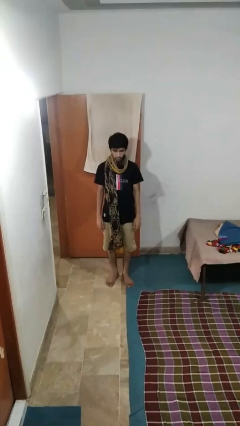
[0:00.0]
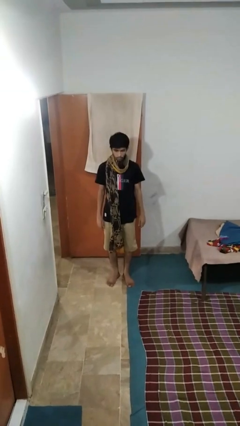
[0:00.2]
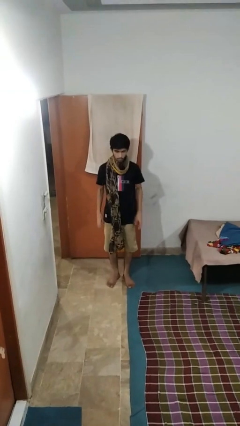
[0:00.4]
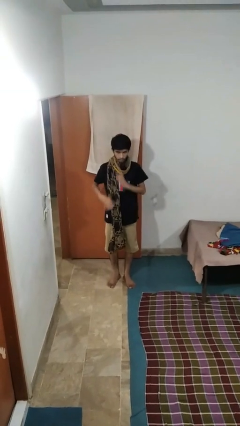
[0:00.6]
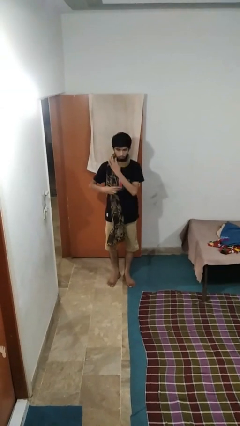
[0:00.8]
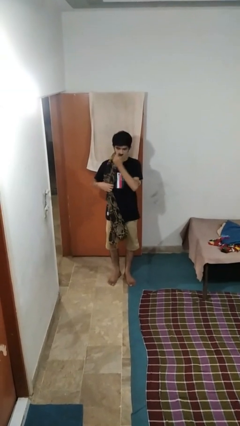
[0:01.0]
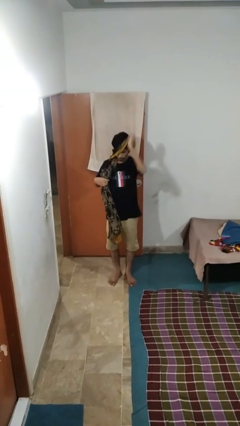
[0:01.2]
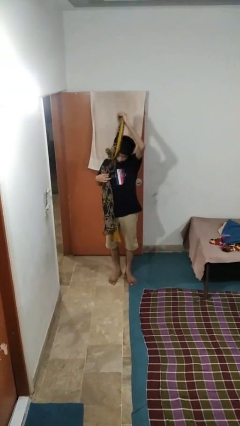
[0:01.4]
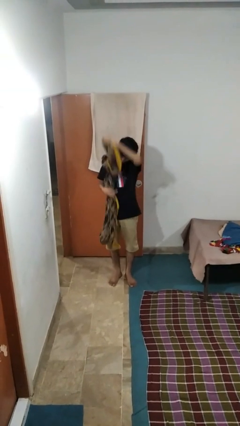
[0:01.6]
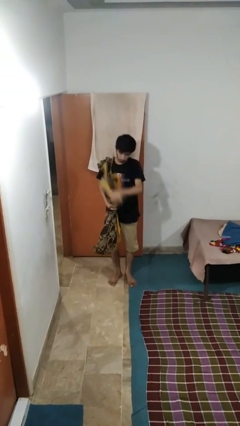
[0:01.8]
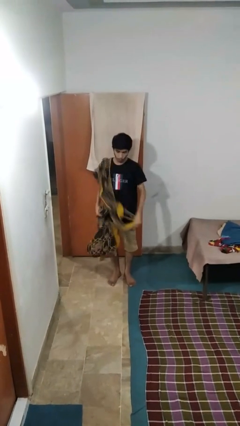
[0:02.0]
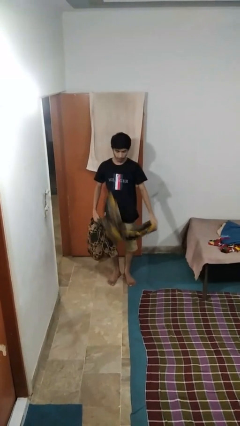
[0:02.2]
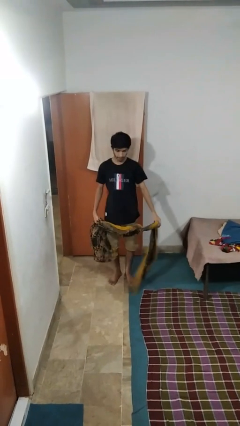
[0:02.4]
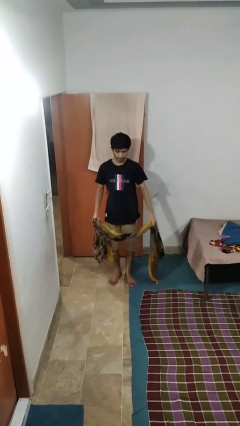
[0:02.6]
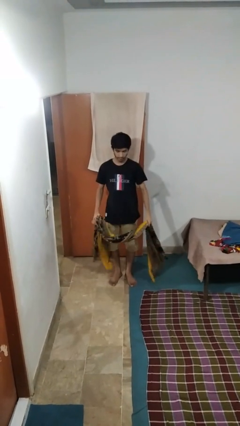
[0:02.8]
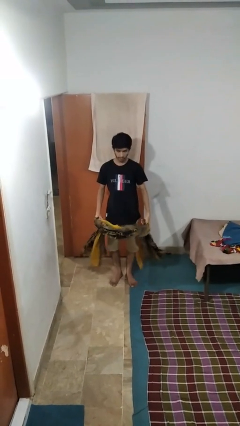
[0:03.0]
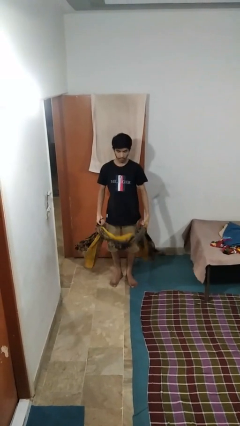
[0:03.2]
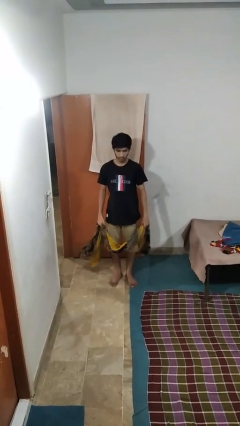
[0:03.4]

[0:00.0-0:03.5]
person takes off scarf

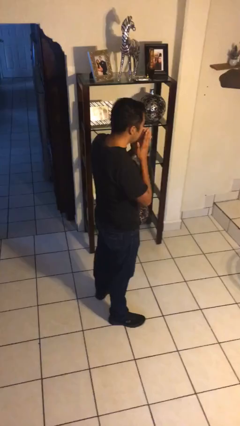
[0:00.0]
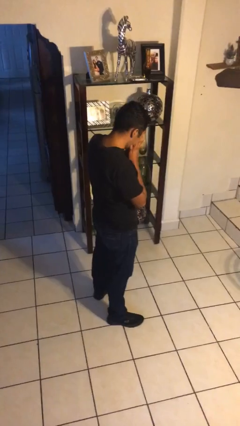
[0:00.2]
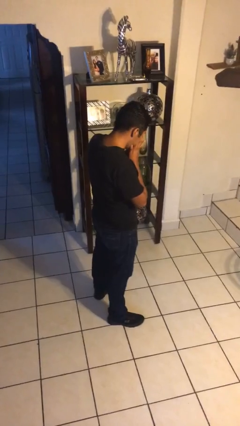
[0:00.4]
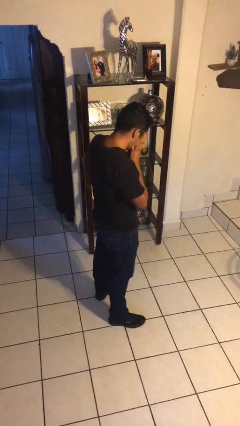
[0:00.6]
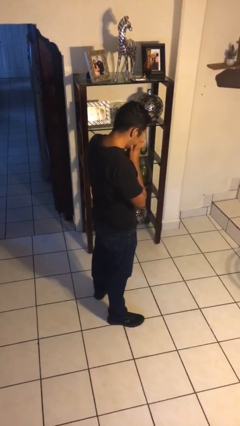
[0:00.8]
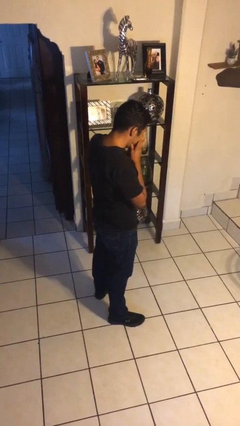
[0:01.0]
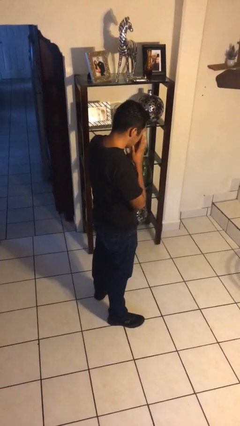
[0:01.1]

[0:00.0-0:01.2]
person sneezes into hand

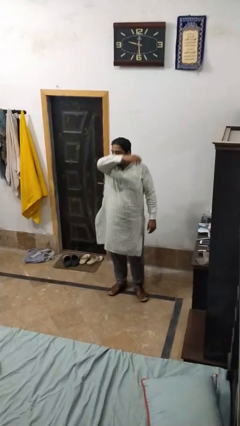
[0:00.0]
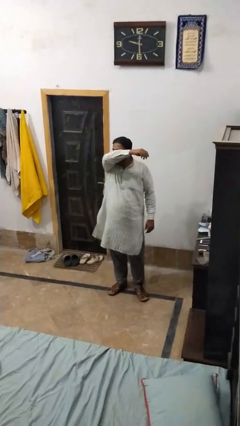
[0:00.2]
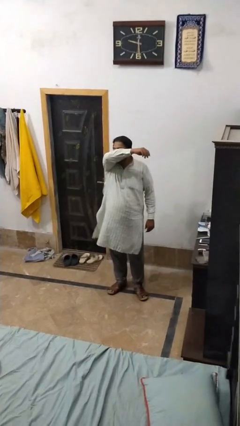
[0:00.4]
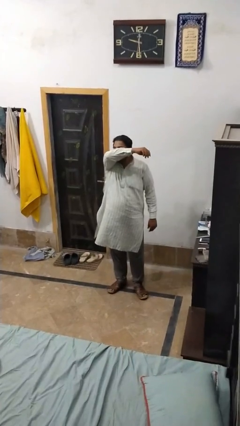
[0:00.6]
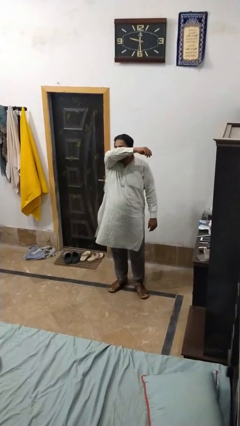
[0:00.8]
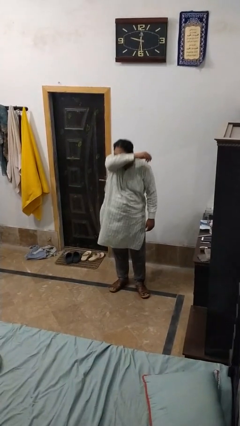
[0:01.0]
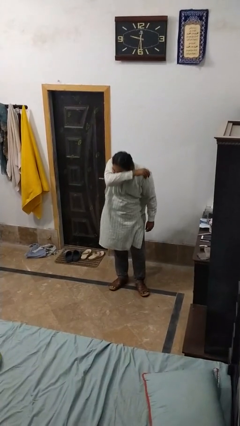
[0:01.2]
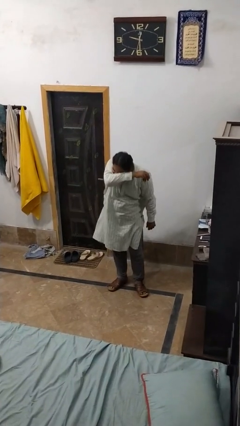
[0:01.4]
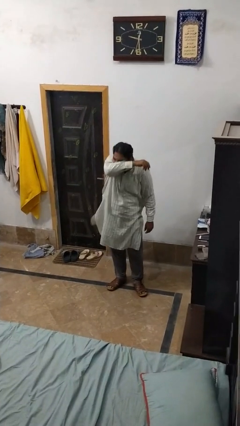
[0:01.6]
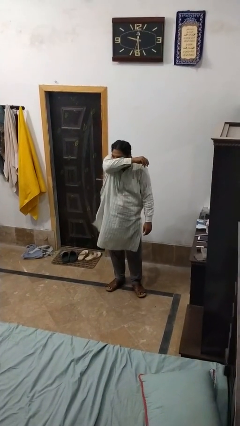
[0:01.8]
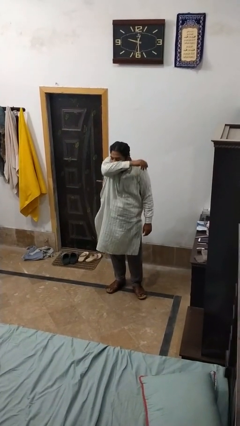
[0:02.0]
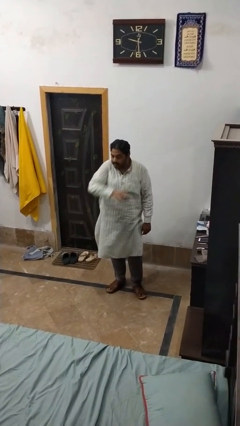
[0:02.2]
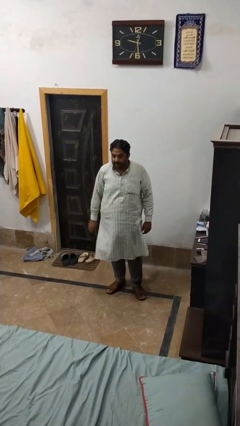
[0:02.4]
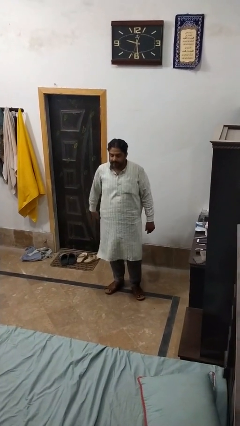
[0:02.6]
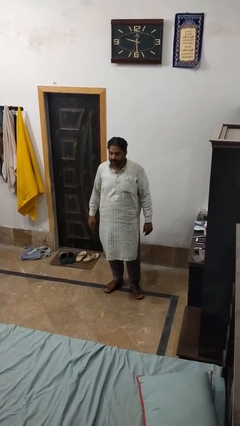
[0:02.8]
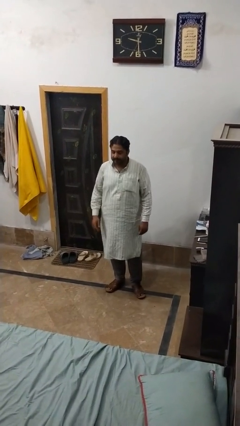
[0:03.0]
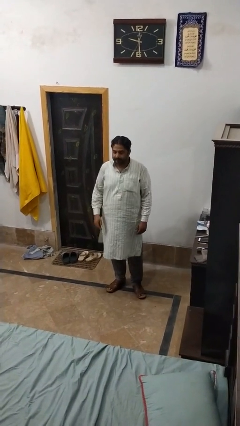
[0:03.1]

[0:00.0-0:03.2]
person sneezes into arm

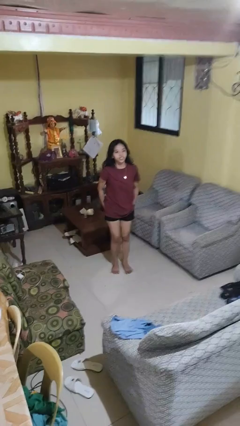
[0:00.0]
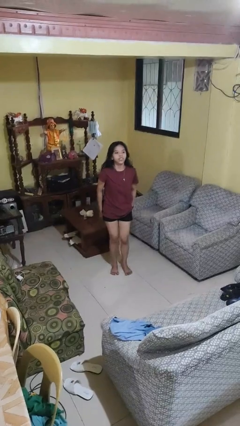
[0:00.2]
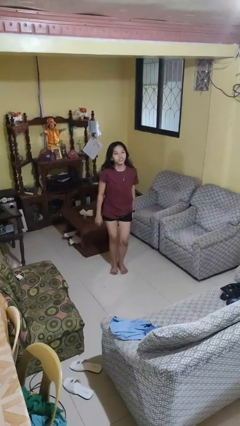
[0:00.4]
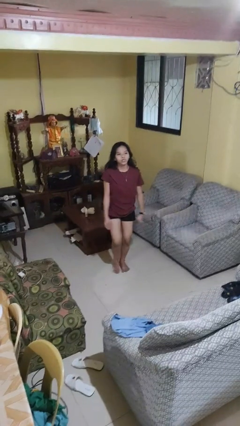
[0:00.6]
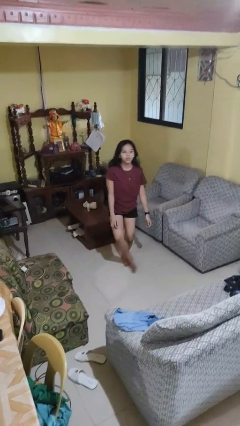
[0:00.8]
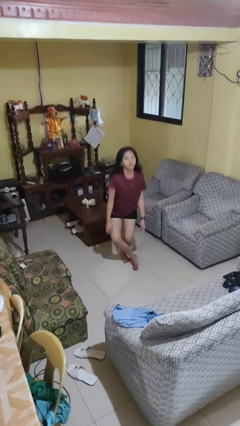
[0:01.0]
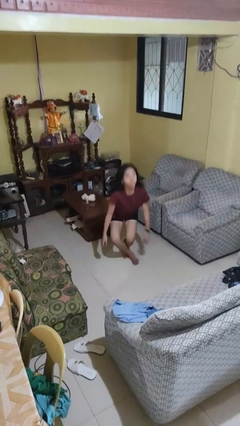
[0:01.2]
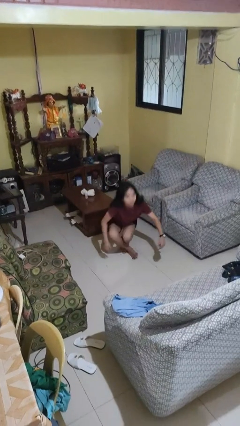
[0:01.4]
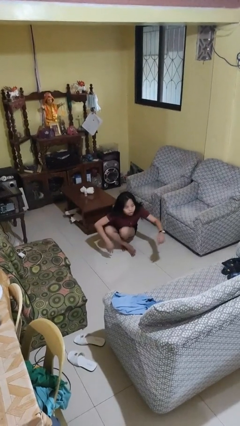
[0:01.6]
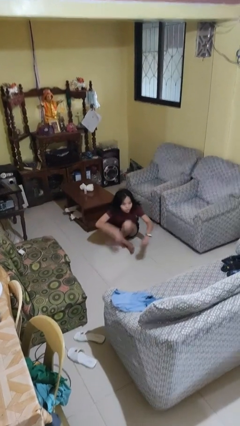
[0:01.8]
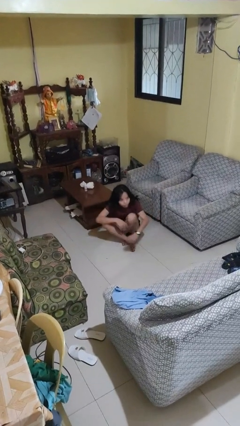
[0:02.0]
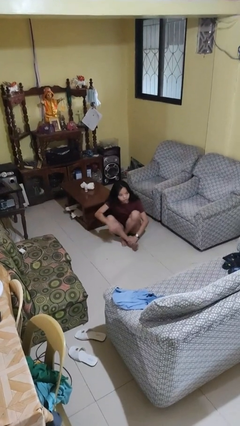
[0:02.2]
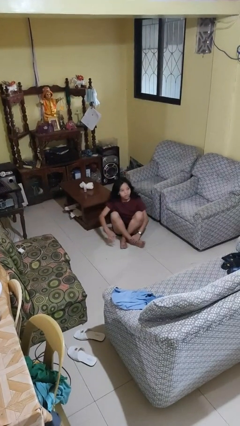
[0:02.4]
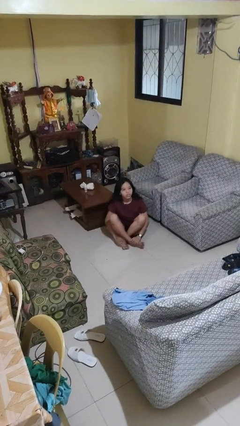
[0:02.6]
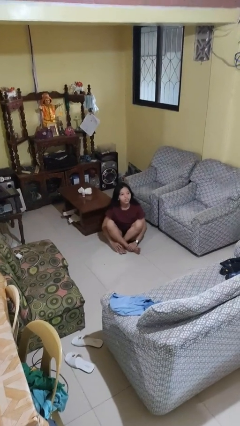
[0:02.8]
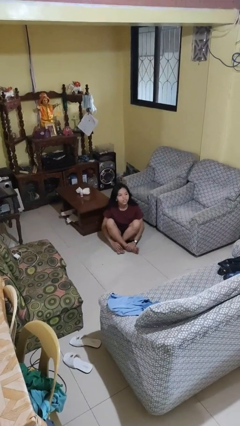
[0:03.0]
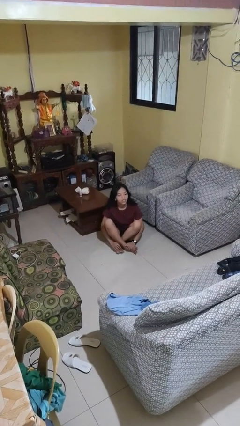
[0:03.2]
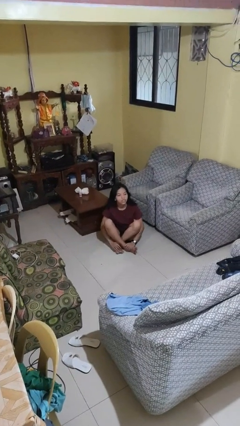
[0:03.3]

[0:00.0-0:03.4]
person sits crisscross

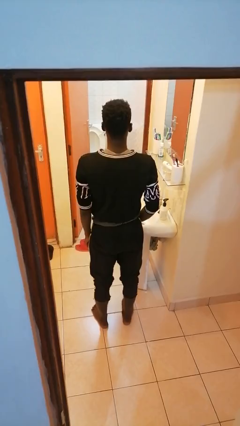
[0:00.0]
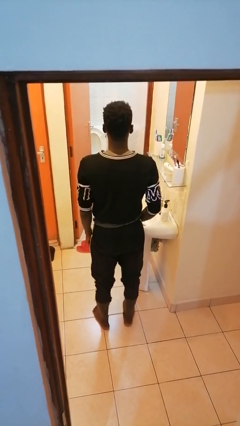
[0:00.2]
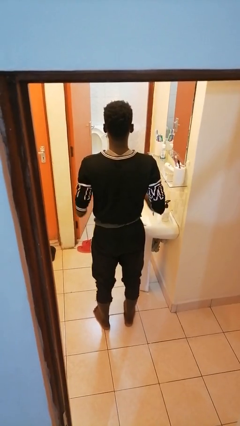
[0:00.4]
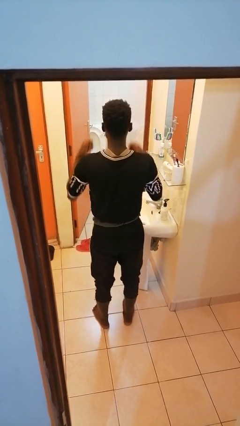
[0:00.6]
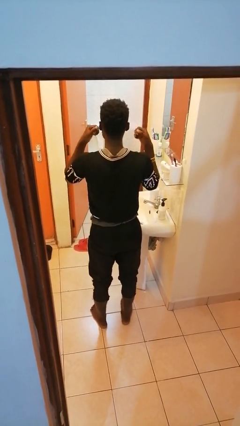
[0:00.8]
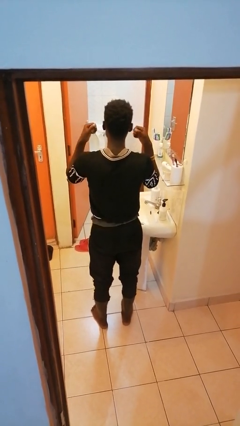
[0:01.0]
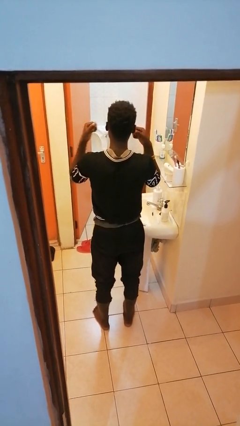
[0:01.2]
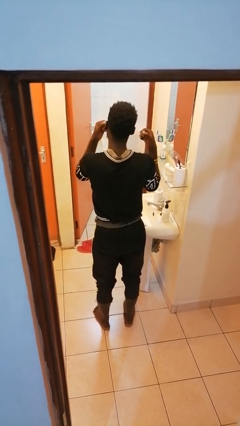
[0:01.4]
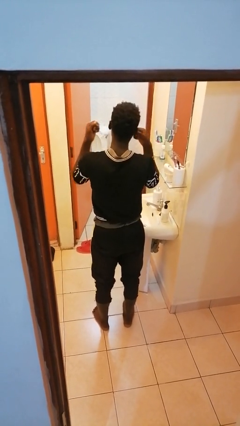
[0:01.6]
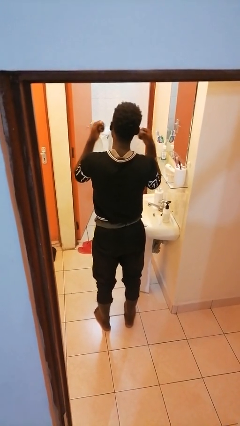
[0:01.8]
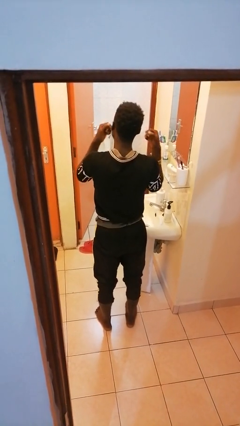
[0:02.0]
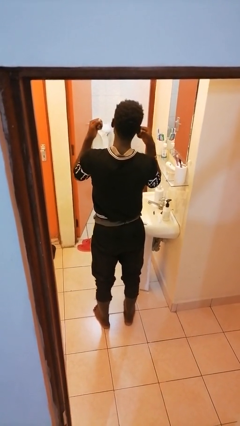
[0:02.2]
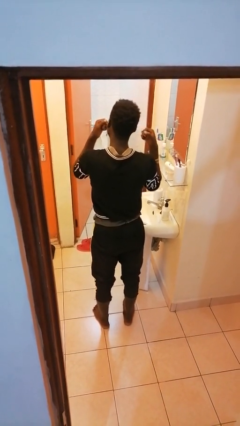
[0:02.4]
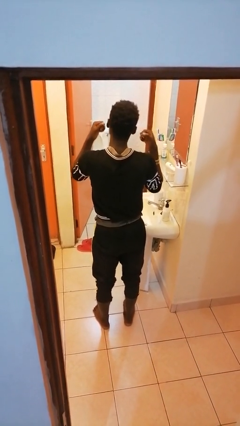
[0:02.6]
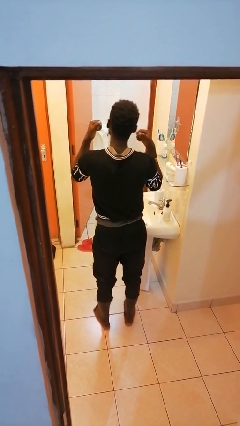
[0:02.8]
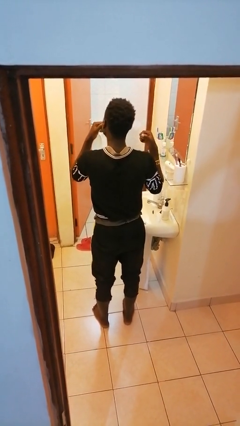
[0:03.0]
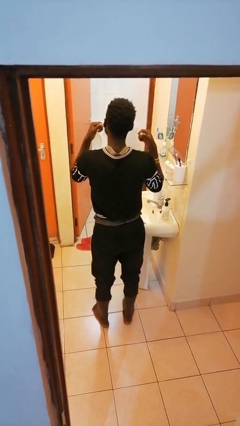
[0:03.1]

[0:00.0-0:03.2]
person flosses

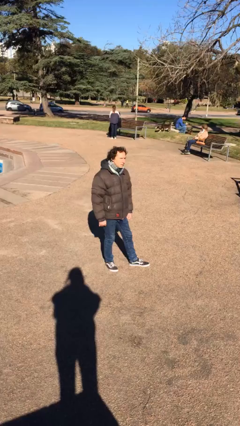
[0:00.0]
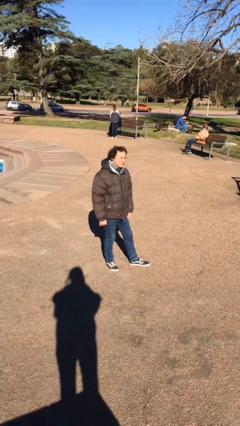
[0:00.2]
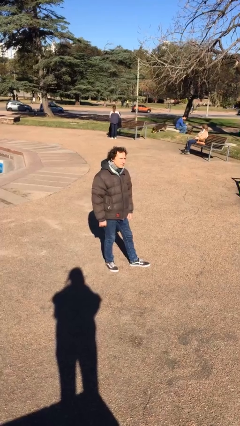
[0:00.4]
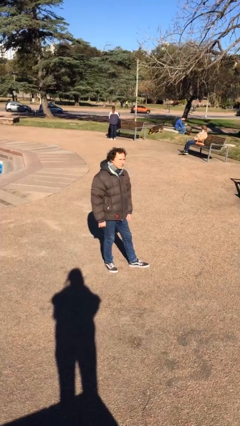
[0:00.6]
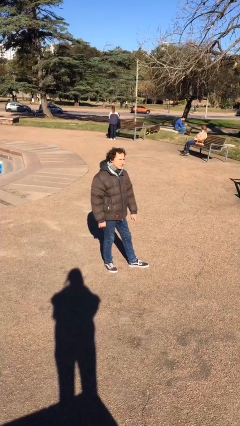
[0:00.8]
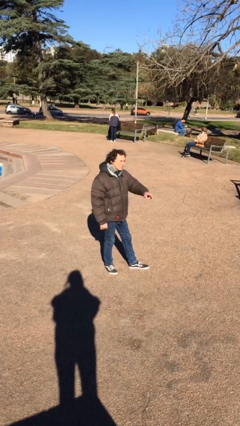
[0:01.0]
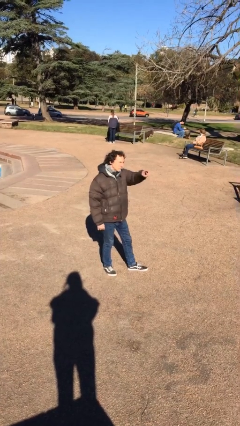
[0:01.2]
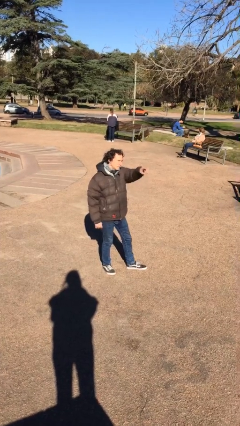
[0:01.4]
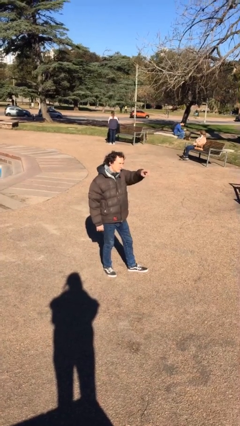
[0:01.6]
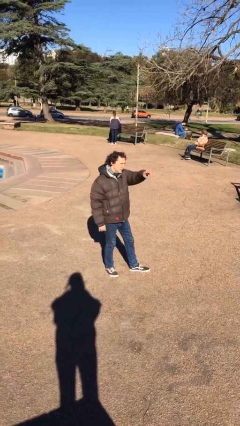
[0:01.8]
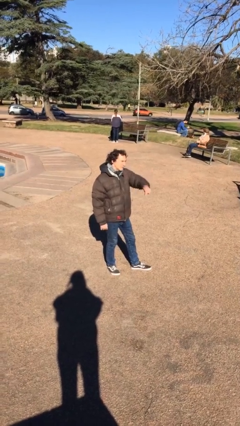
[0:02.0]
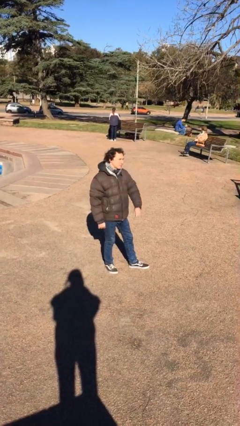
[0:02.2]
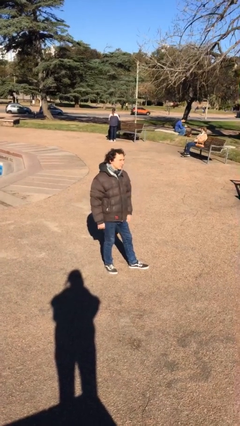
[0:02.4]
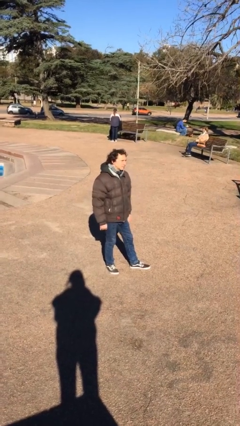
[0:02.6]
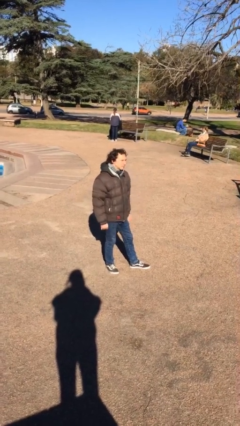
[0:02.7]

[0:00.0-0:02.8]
person points at person

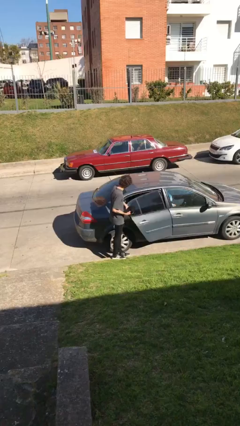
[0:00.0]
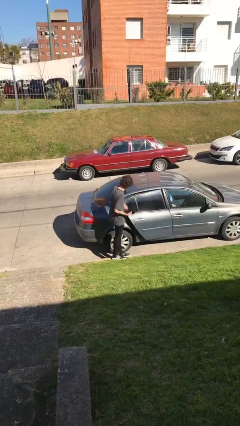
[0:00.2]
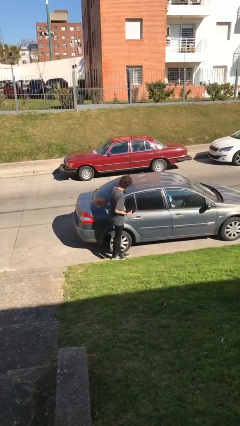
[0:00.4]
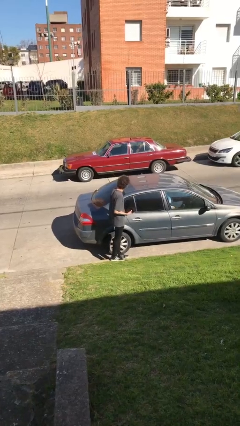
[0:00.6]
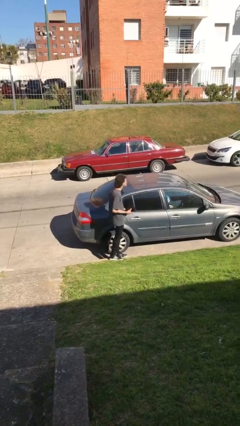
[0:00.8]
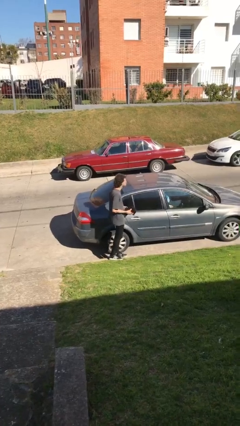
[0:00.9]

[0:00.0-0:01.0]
person closes car door
